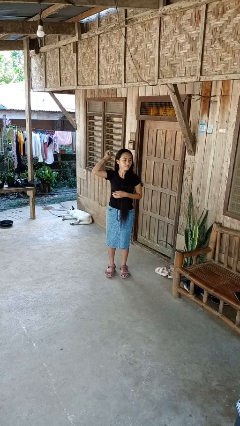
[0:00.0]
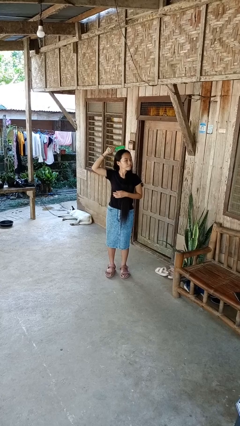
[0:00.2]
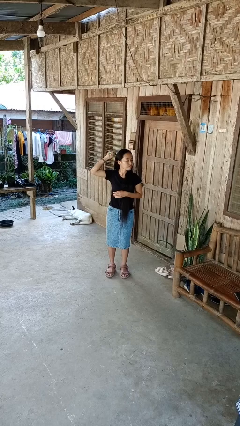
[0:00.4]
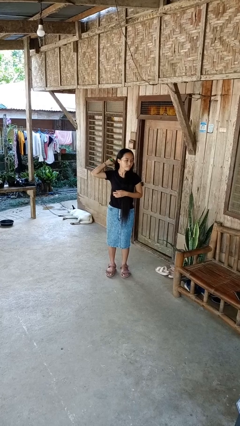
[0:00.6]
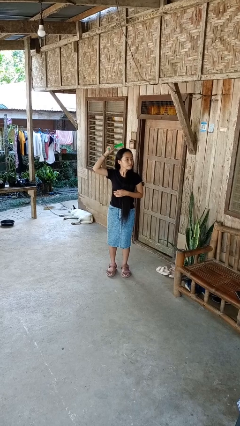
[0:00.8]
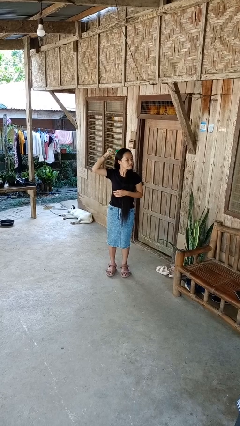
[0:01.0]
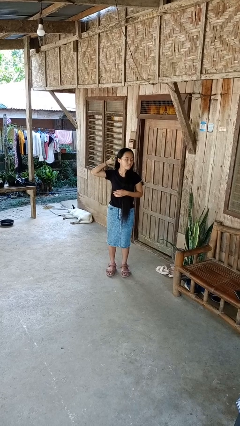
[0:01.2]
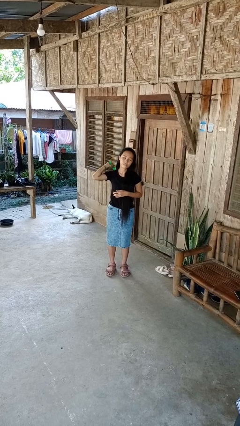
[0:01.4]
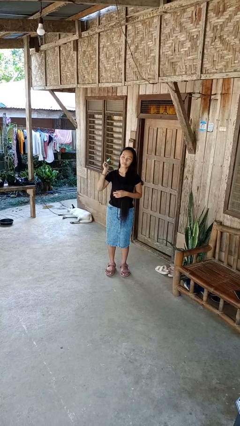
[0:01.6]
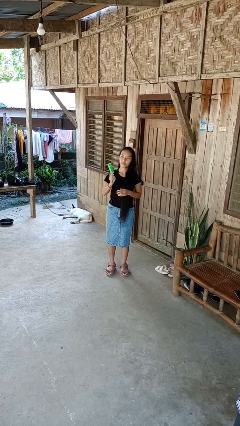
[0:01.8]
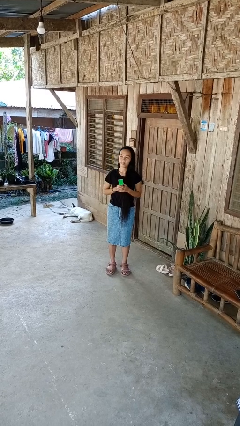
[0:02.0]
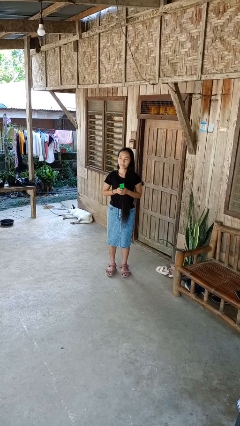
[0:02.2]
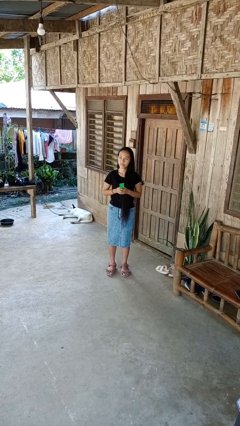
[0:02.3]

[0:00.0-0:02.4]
person brushes hair

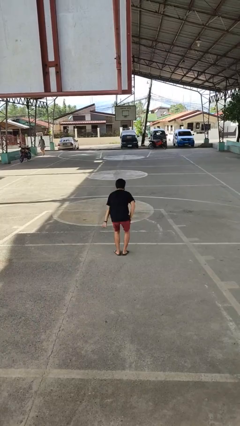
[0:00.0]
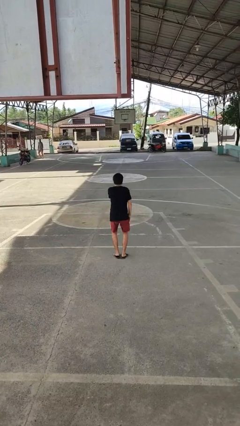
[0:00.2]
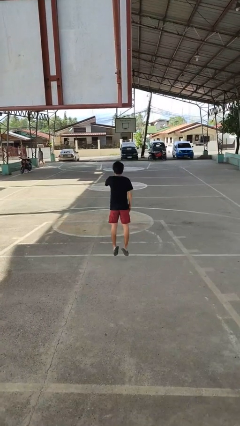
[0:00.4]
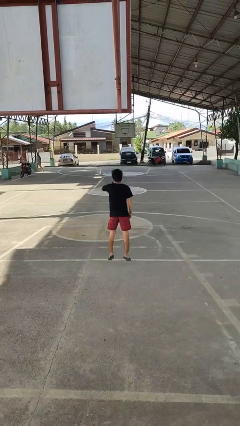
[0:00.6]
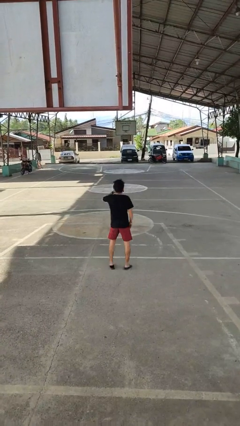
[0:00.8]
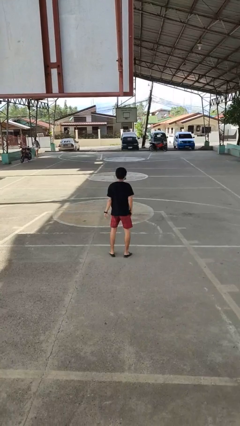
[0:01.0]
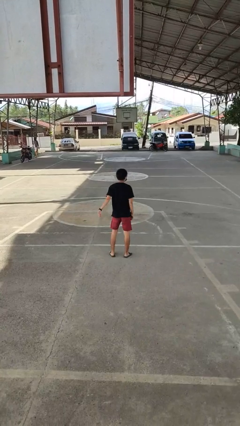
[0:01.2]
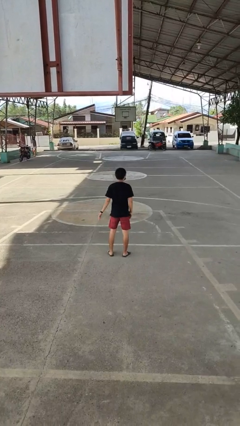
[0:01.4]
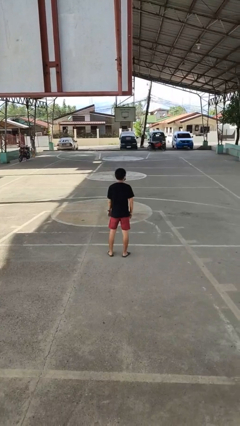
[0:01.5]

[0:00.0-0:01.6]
person jumps

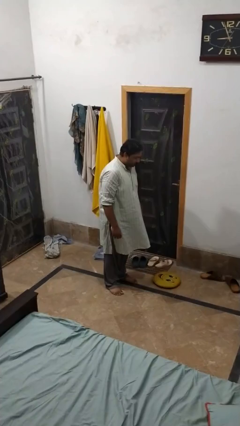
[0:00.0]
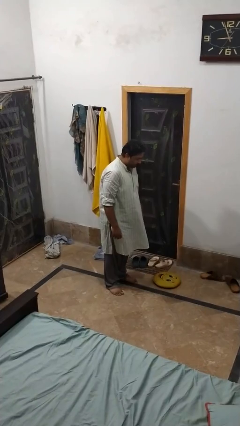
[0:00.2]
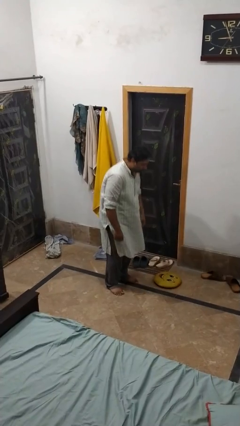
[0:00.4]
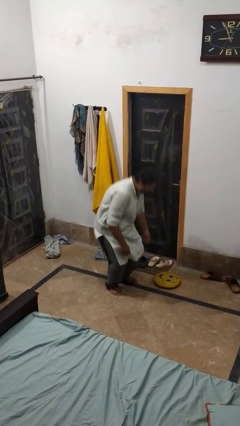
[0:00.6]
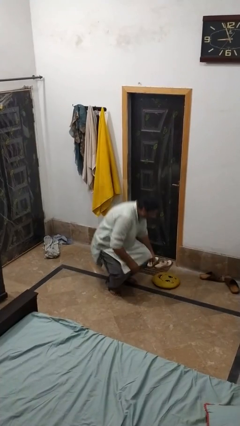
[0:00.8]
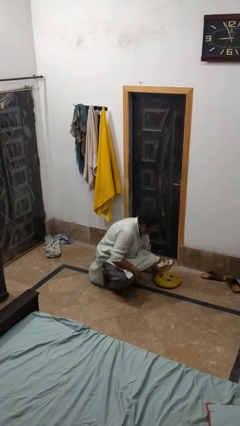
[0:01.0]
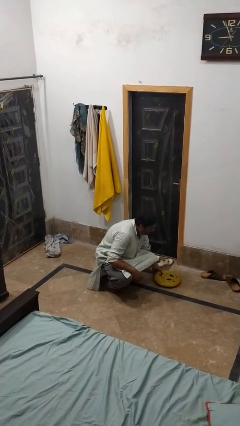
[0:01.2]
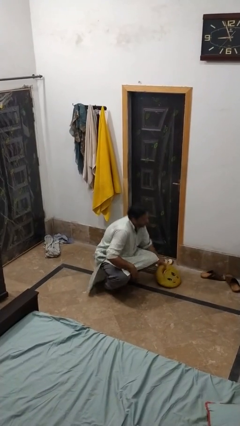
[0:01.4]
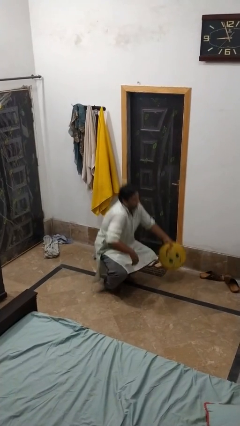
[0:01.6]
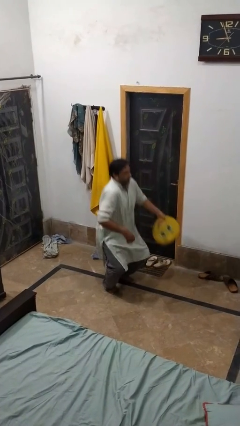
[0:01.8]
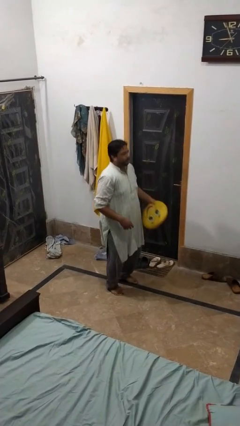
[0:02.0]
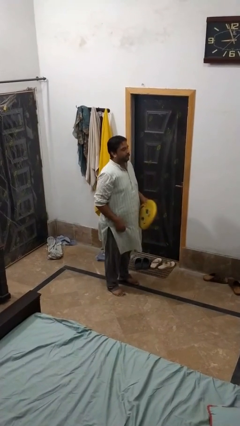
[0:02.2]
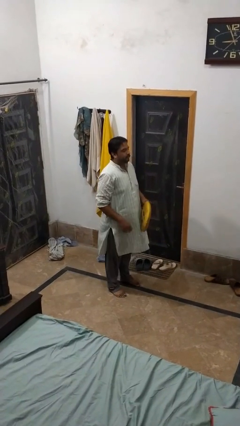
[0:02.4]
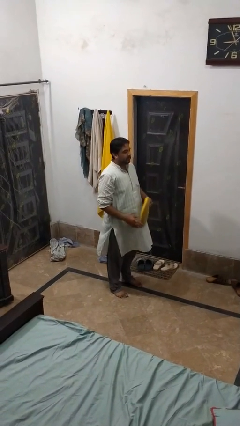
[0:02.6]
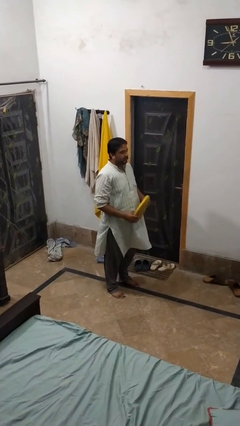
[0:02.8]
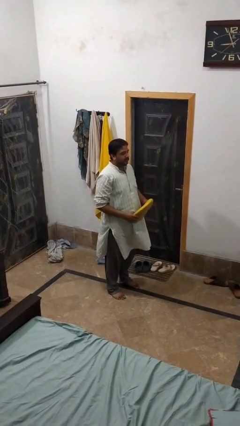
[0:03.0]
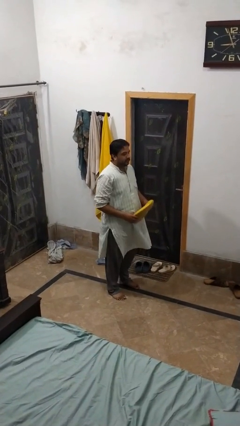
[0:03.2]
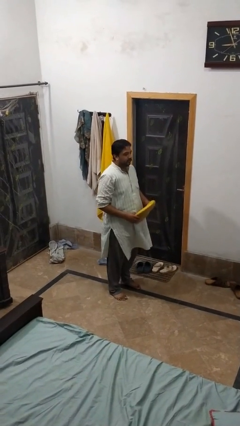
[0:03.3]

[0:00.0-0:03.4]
person picks up object from floor

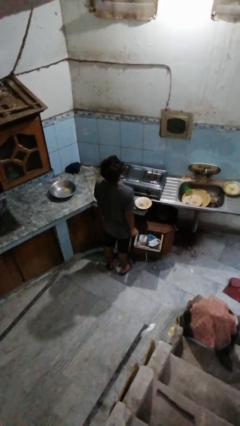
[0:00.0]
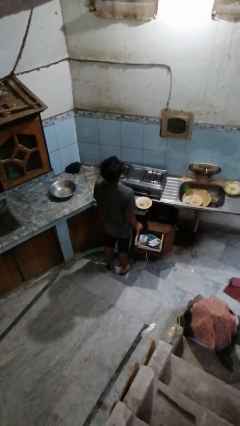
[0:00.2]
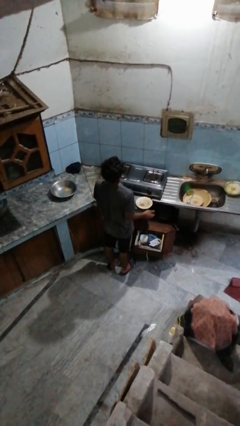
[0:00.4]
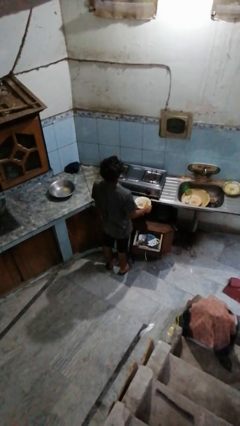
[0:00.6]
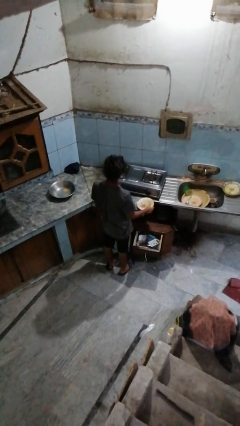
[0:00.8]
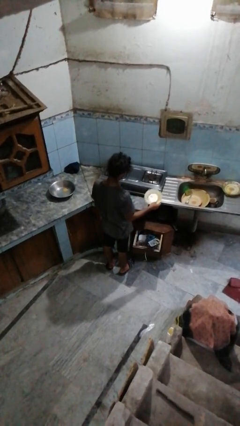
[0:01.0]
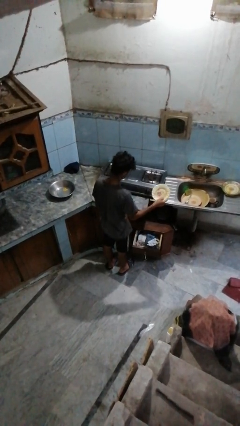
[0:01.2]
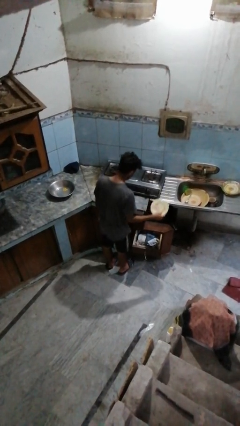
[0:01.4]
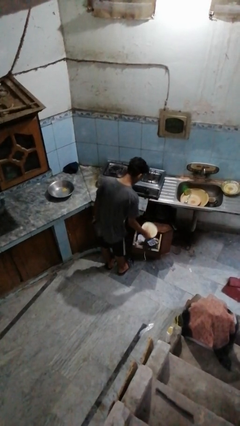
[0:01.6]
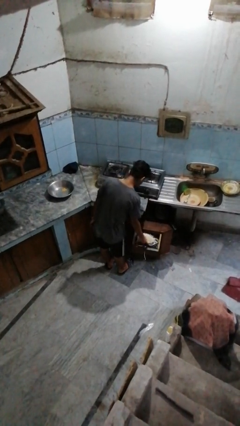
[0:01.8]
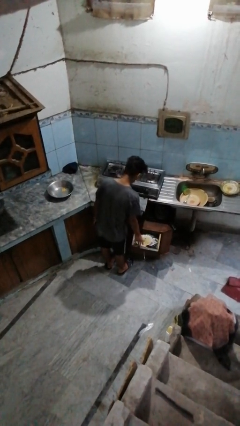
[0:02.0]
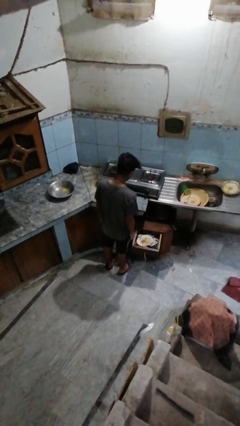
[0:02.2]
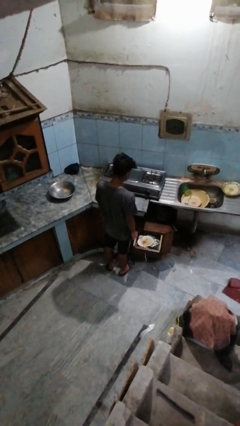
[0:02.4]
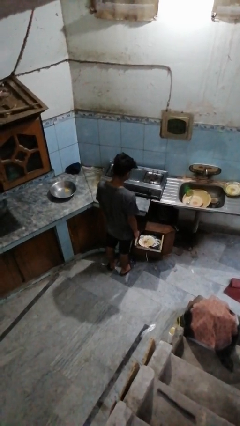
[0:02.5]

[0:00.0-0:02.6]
person puts object into kitchen drawer

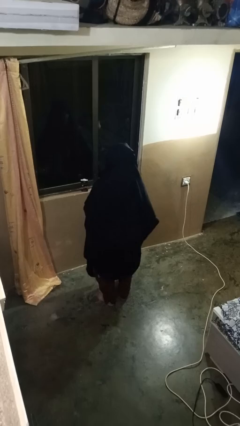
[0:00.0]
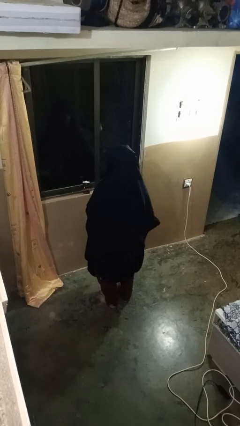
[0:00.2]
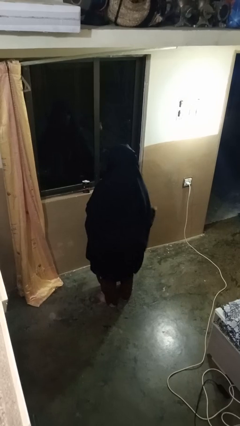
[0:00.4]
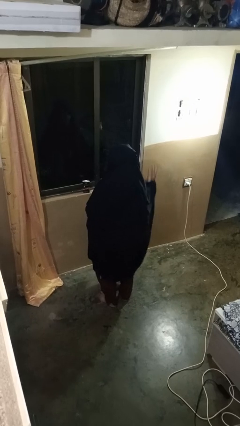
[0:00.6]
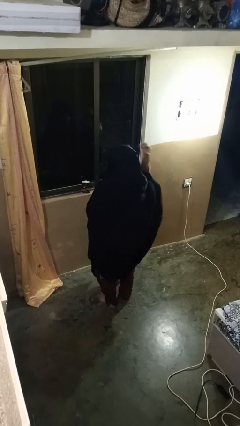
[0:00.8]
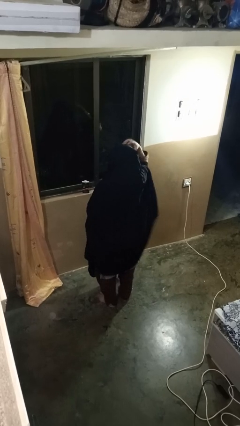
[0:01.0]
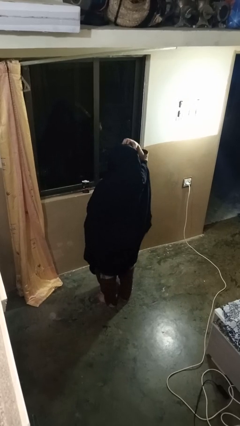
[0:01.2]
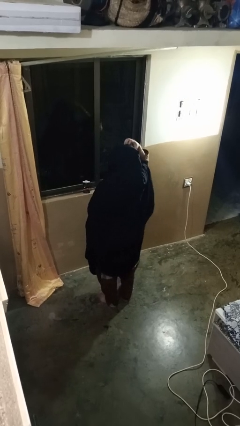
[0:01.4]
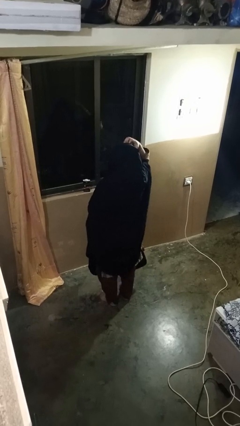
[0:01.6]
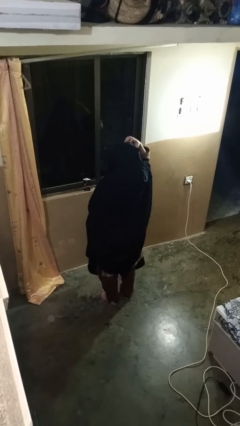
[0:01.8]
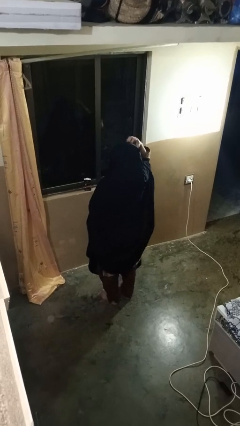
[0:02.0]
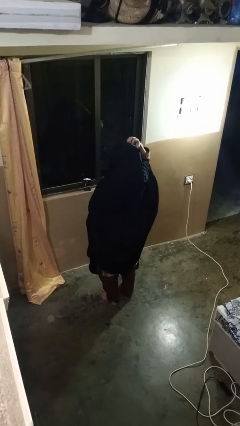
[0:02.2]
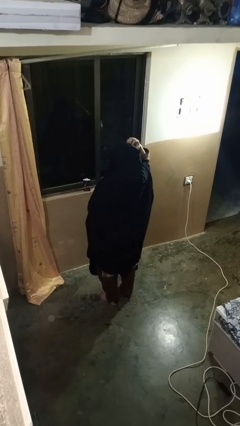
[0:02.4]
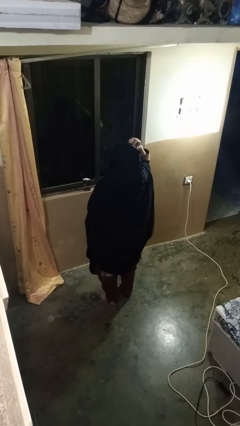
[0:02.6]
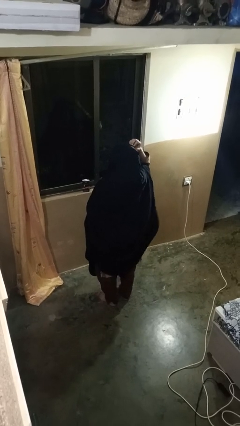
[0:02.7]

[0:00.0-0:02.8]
person scratches face

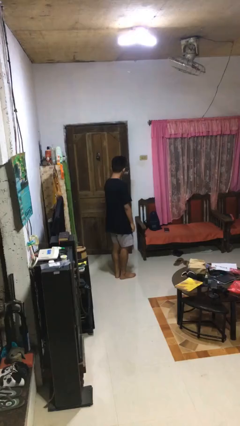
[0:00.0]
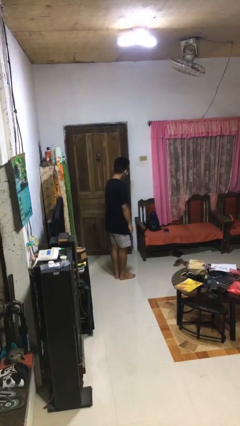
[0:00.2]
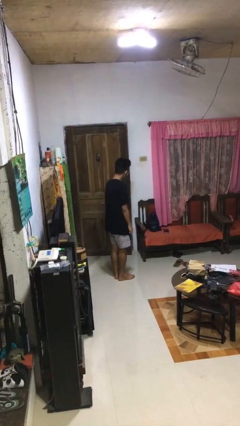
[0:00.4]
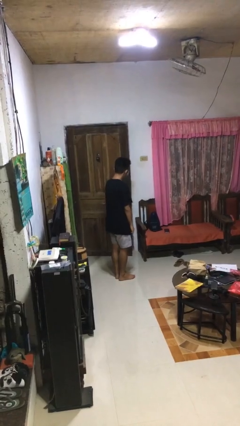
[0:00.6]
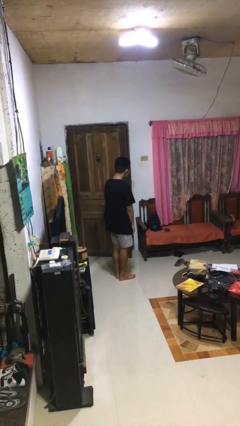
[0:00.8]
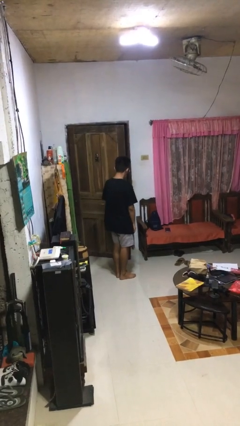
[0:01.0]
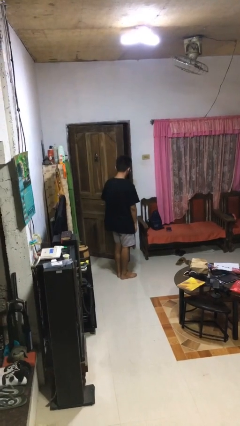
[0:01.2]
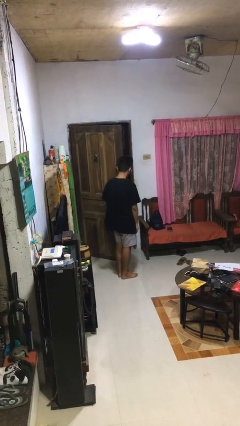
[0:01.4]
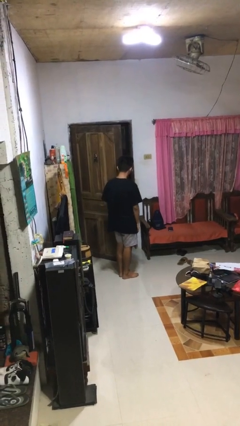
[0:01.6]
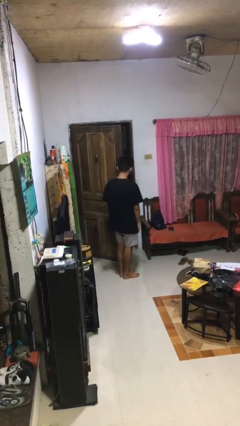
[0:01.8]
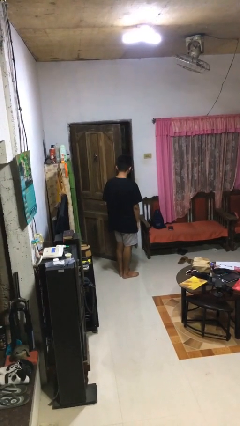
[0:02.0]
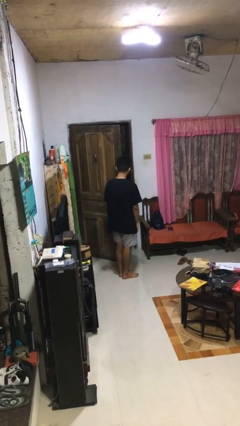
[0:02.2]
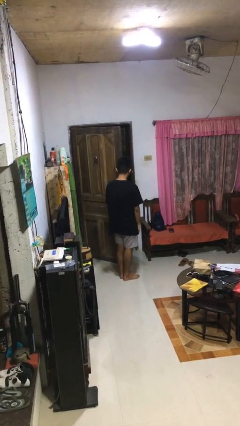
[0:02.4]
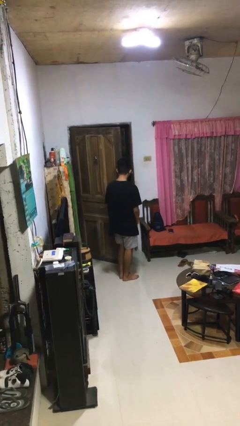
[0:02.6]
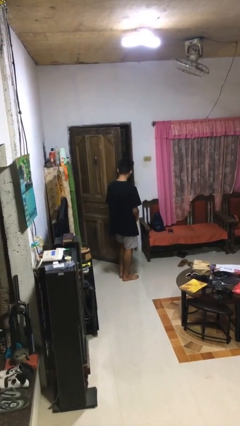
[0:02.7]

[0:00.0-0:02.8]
person opens facility door

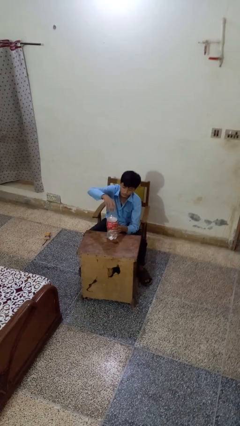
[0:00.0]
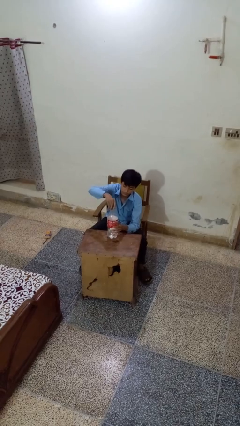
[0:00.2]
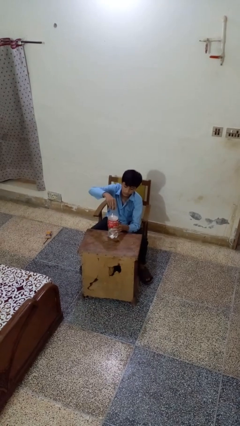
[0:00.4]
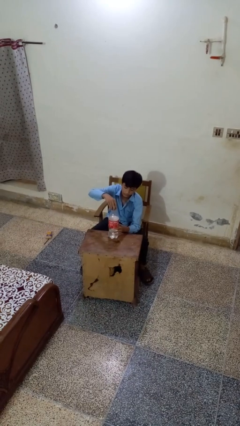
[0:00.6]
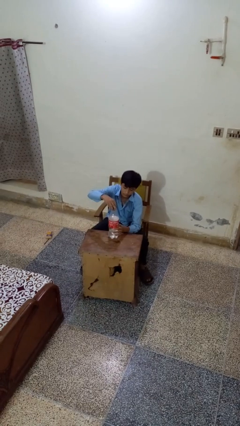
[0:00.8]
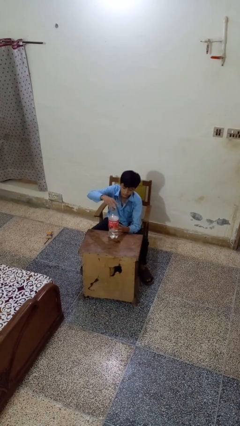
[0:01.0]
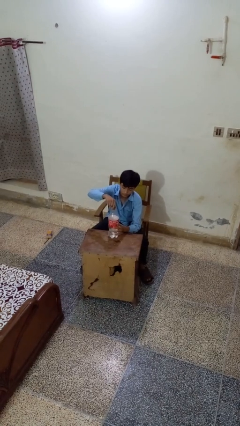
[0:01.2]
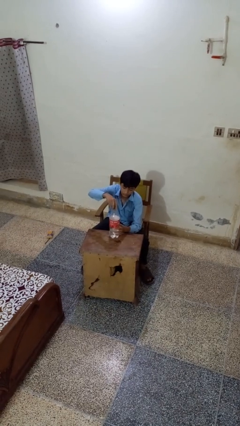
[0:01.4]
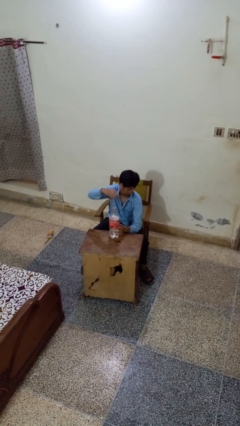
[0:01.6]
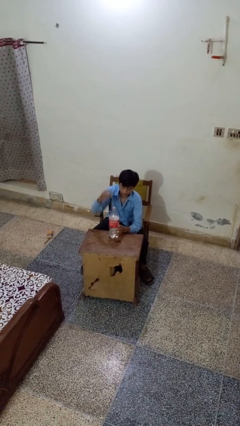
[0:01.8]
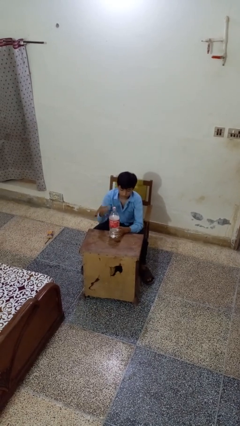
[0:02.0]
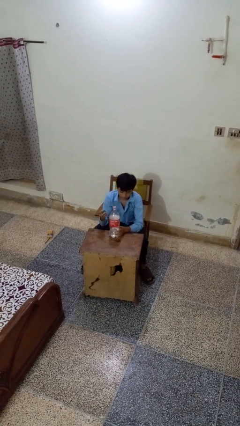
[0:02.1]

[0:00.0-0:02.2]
person unscrews lid from bottle
